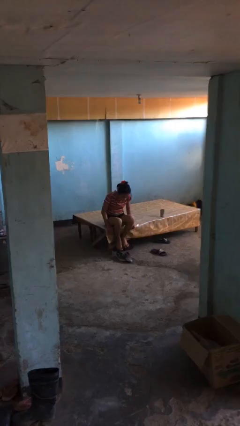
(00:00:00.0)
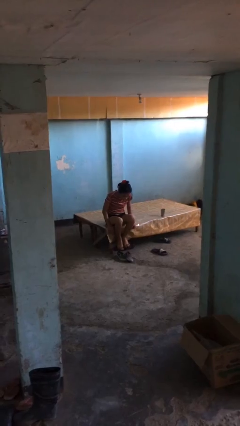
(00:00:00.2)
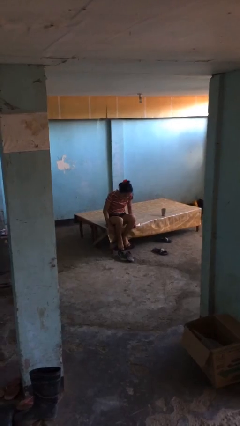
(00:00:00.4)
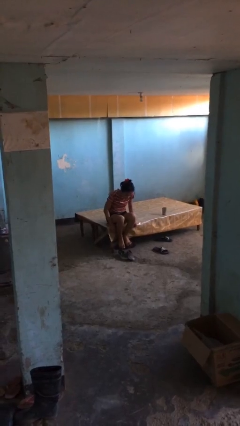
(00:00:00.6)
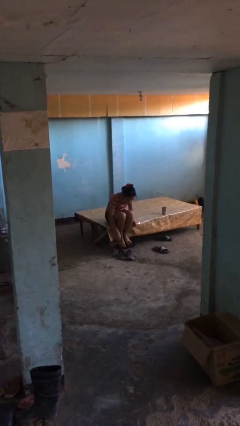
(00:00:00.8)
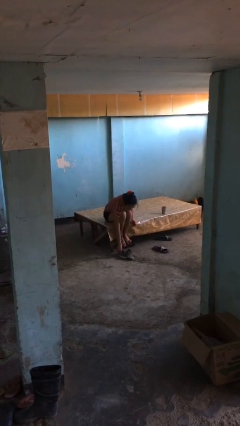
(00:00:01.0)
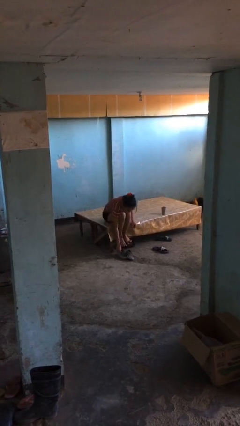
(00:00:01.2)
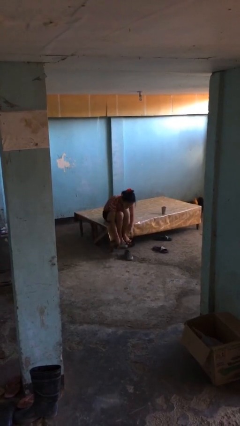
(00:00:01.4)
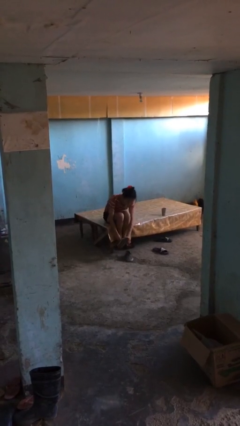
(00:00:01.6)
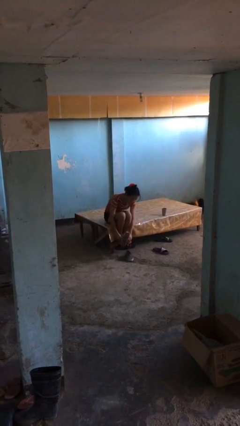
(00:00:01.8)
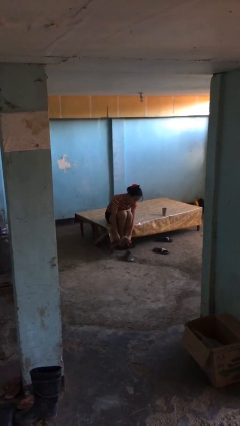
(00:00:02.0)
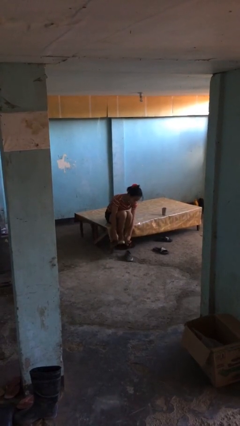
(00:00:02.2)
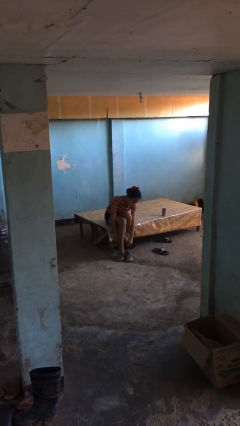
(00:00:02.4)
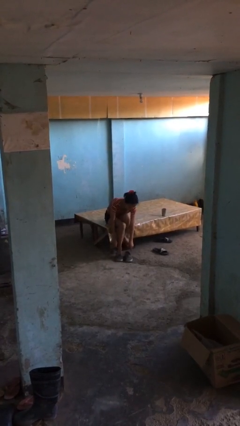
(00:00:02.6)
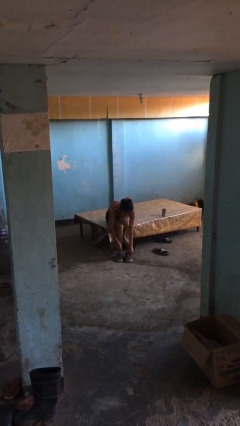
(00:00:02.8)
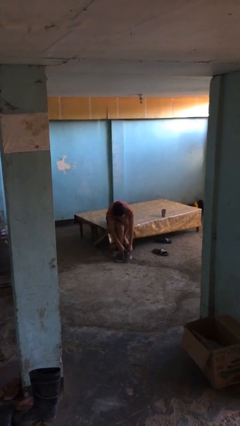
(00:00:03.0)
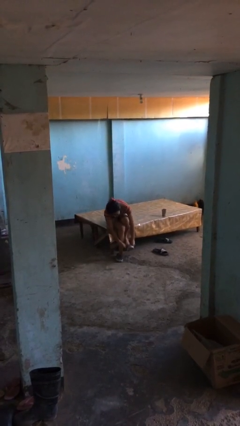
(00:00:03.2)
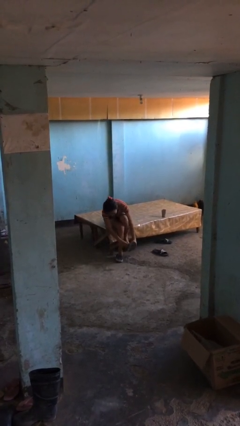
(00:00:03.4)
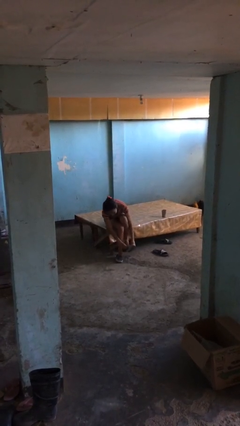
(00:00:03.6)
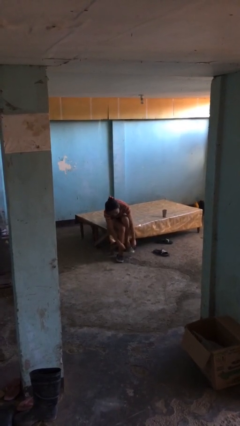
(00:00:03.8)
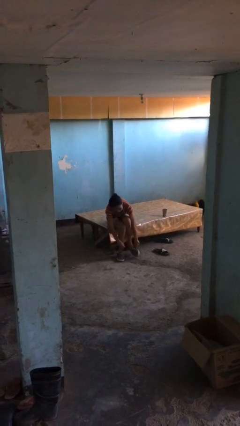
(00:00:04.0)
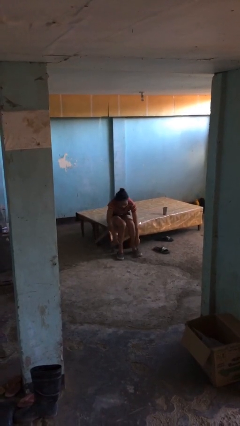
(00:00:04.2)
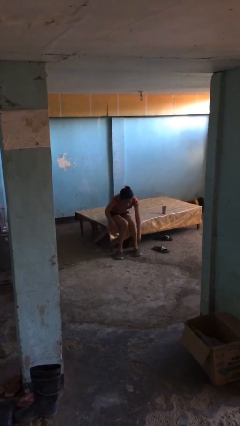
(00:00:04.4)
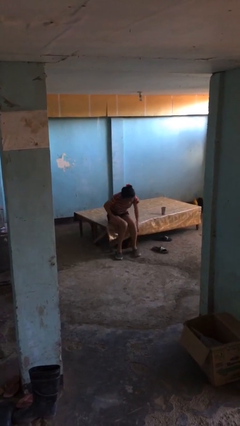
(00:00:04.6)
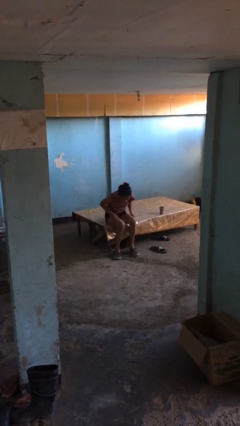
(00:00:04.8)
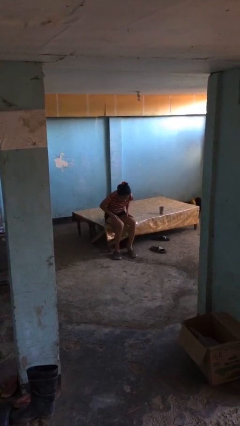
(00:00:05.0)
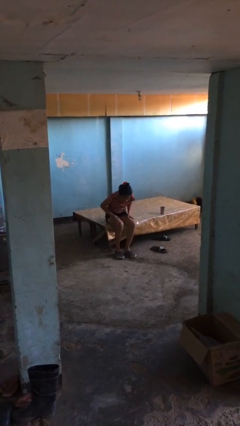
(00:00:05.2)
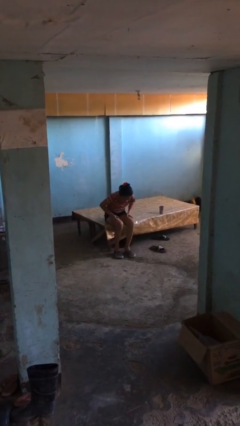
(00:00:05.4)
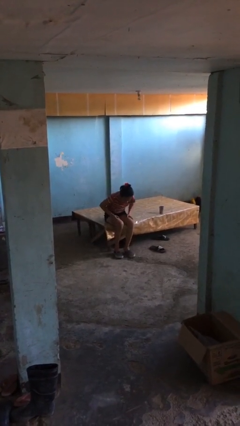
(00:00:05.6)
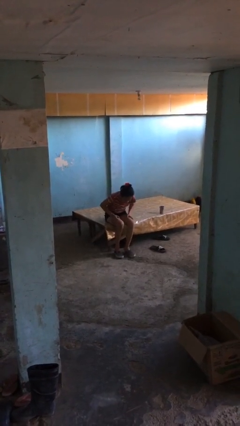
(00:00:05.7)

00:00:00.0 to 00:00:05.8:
person puts on shoes

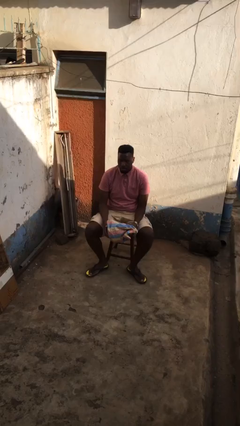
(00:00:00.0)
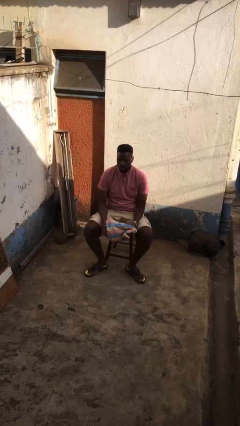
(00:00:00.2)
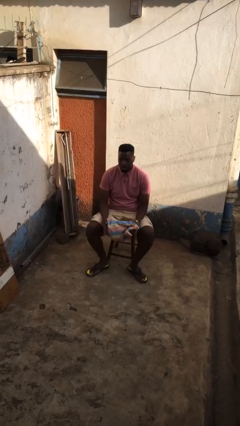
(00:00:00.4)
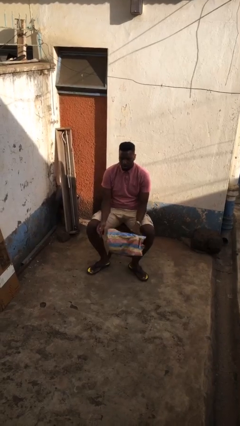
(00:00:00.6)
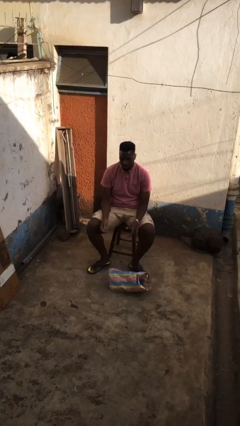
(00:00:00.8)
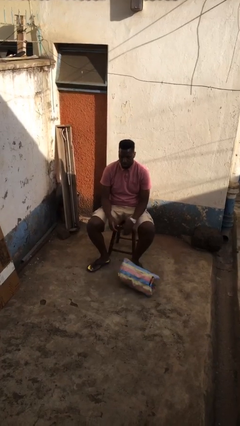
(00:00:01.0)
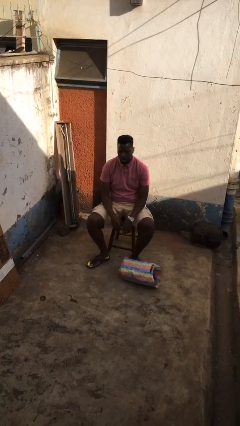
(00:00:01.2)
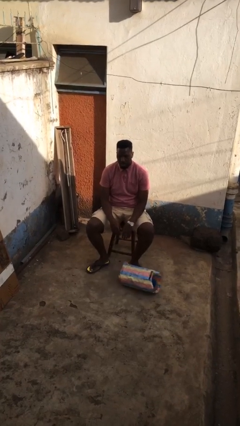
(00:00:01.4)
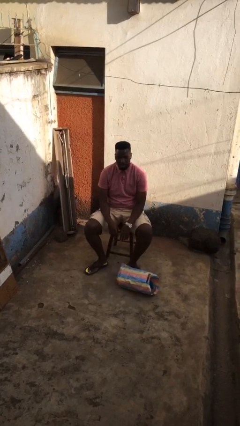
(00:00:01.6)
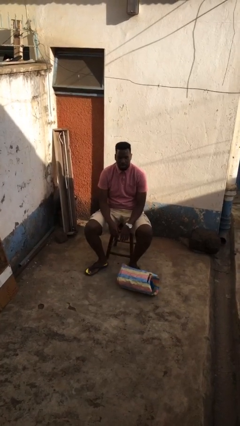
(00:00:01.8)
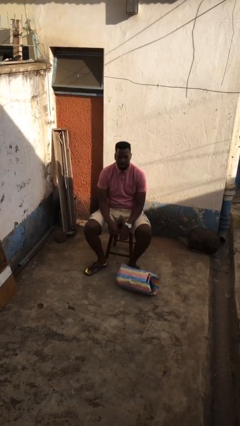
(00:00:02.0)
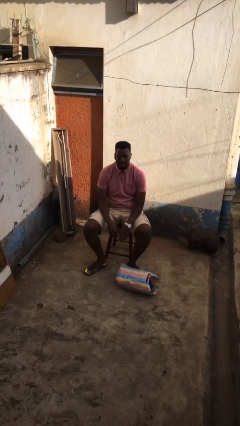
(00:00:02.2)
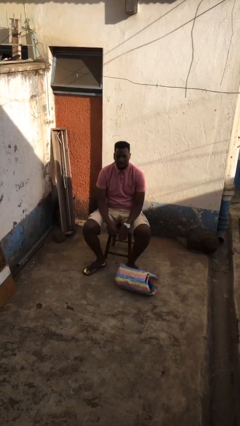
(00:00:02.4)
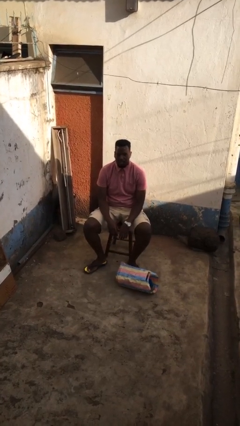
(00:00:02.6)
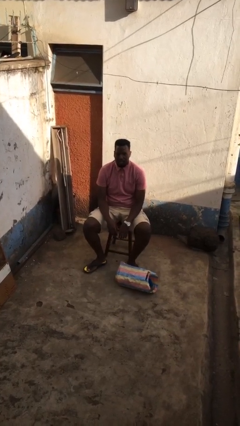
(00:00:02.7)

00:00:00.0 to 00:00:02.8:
person drops object

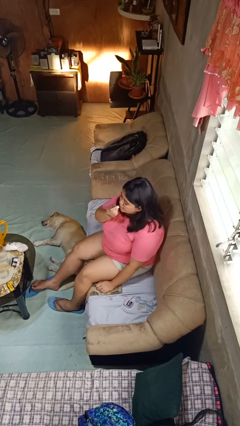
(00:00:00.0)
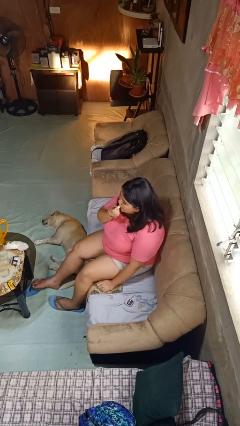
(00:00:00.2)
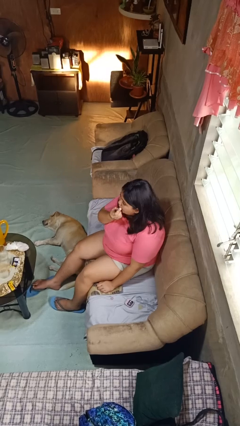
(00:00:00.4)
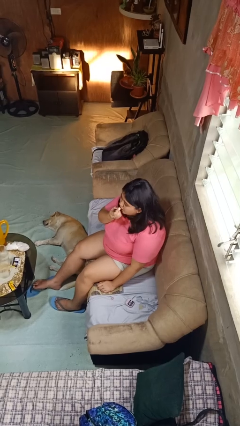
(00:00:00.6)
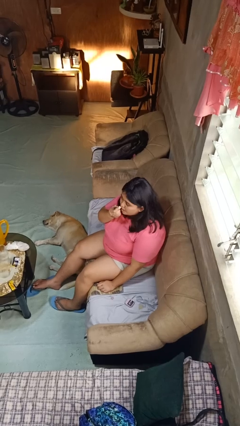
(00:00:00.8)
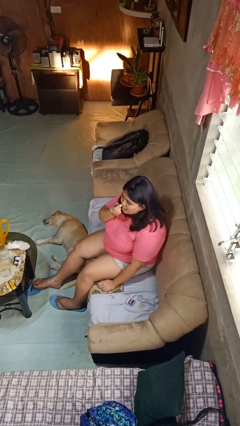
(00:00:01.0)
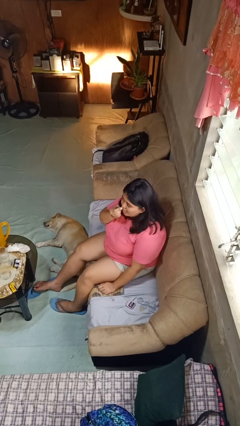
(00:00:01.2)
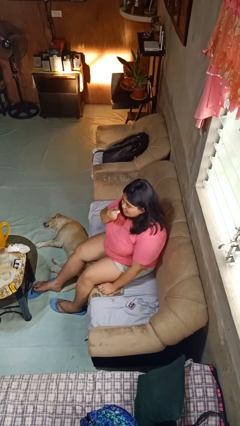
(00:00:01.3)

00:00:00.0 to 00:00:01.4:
person applies lip makeup

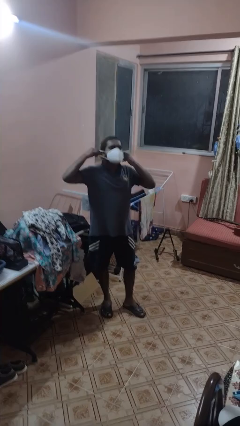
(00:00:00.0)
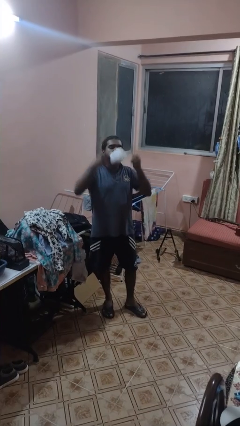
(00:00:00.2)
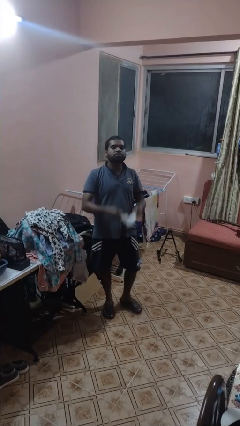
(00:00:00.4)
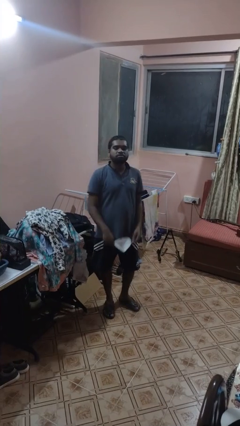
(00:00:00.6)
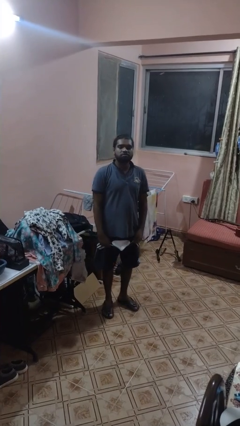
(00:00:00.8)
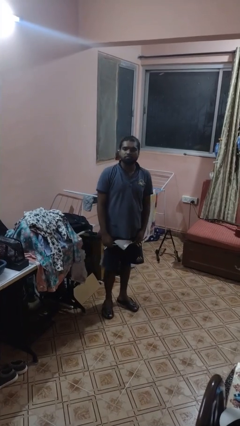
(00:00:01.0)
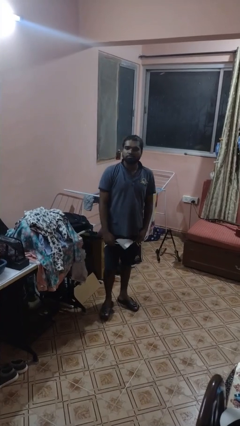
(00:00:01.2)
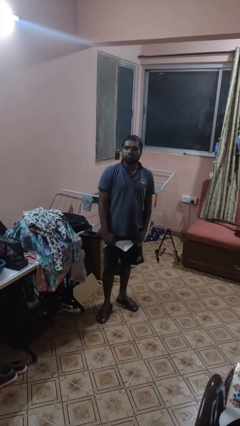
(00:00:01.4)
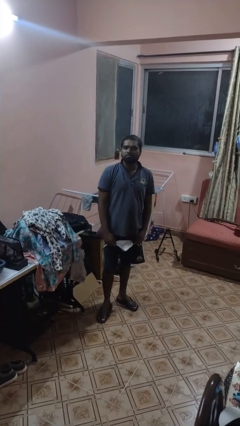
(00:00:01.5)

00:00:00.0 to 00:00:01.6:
person takes off facemask

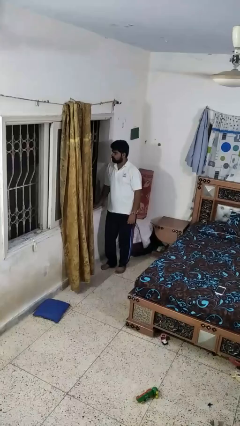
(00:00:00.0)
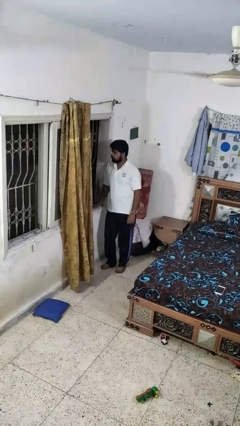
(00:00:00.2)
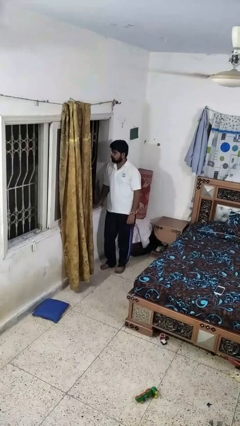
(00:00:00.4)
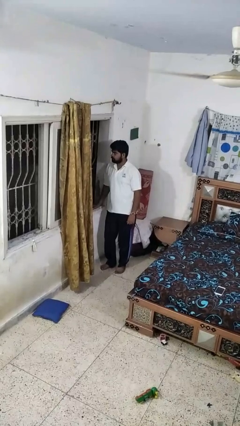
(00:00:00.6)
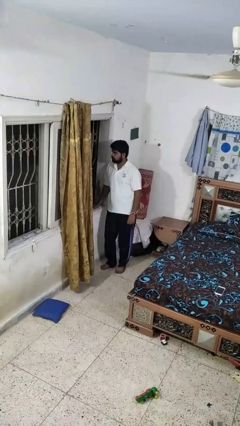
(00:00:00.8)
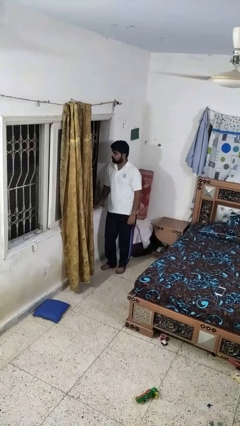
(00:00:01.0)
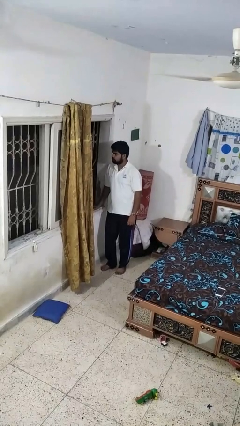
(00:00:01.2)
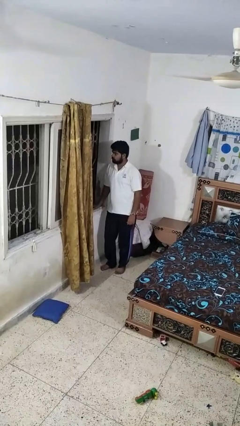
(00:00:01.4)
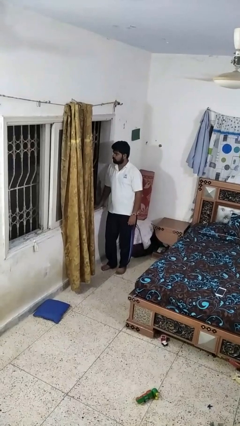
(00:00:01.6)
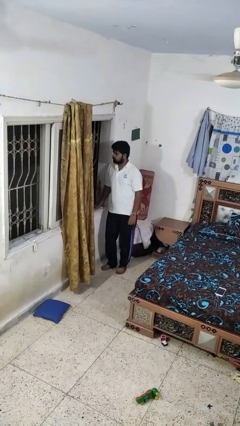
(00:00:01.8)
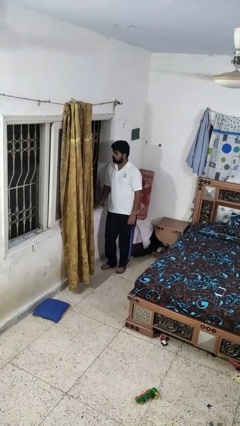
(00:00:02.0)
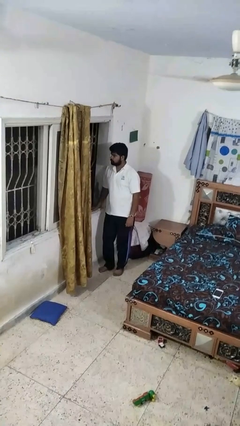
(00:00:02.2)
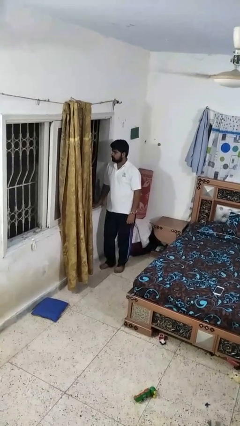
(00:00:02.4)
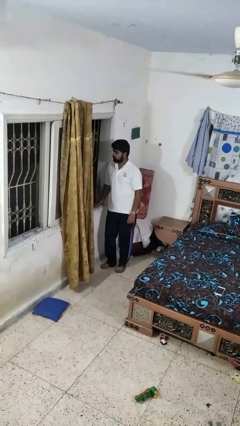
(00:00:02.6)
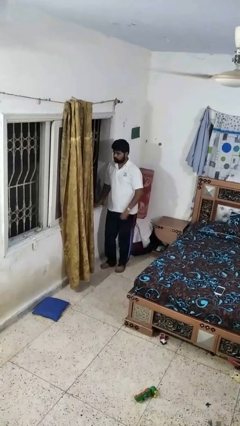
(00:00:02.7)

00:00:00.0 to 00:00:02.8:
person looks at wristwatch

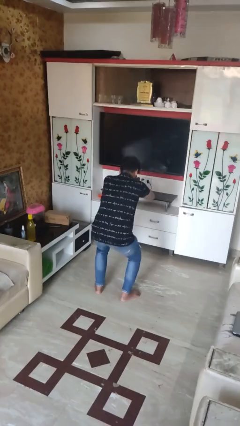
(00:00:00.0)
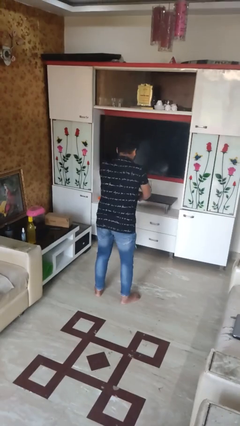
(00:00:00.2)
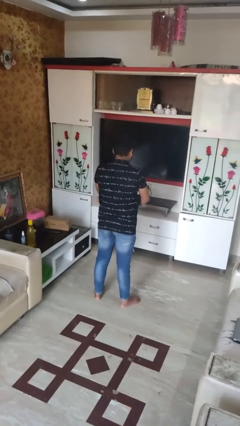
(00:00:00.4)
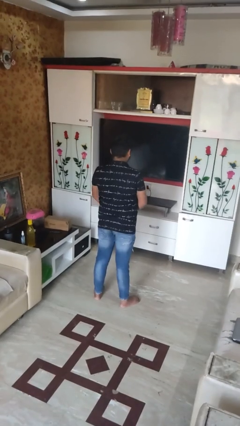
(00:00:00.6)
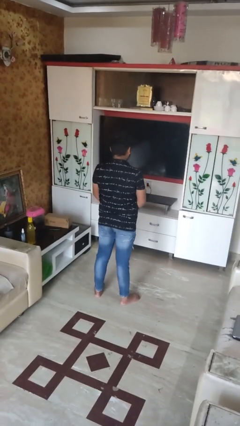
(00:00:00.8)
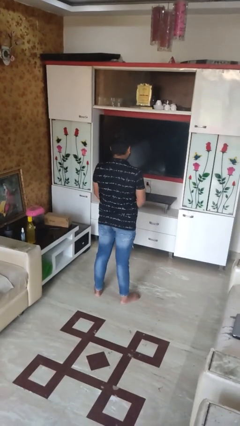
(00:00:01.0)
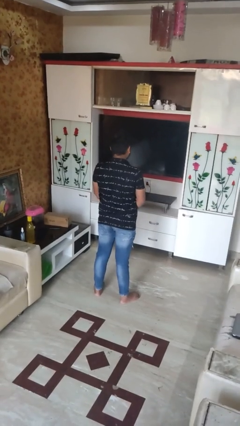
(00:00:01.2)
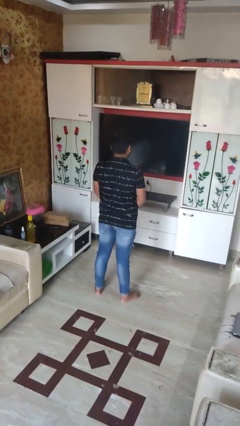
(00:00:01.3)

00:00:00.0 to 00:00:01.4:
person stands up

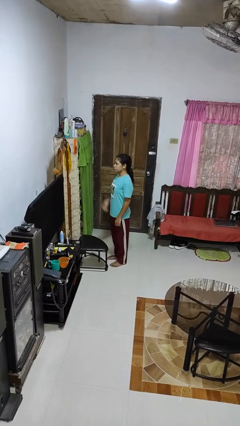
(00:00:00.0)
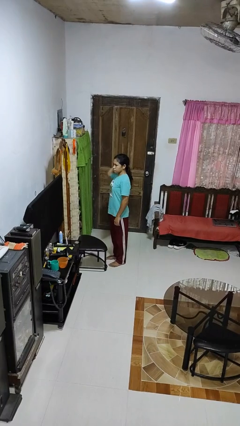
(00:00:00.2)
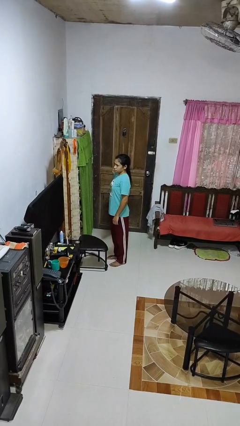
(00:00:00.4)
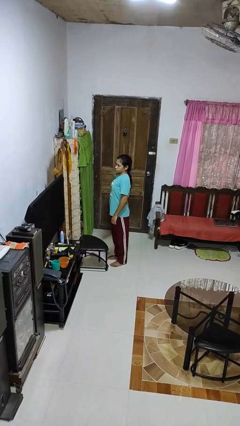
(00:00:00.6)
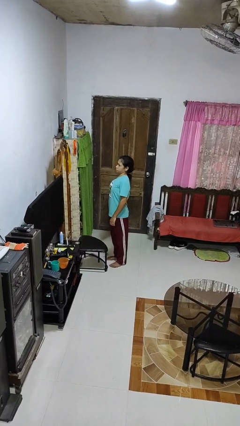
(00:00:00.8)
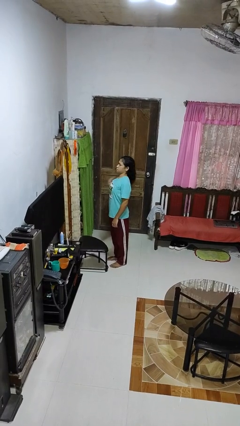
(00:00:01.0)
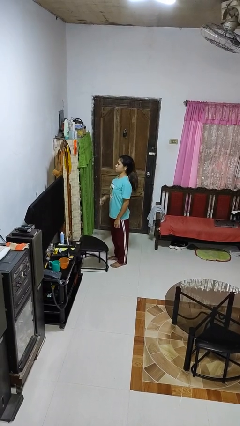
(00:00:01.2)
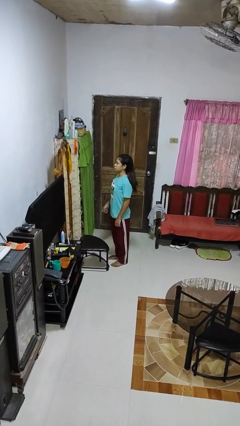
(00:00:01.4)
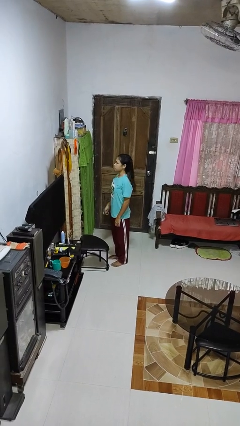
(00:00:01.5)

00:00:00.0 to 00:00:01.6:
person takes off hairtie
